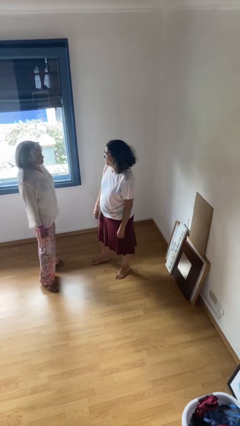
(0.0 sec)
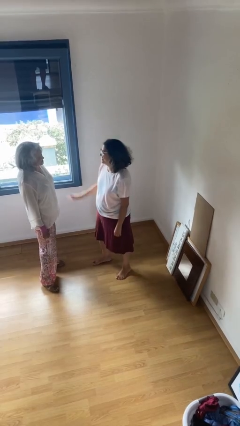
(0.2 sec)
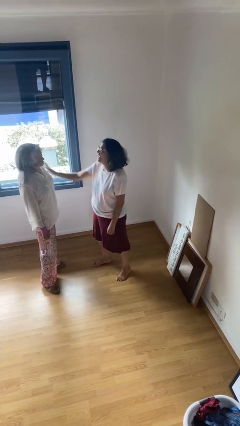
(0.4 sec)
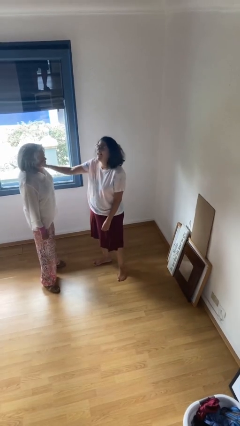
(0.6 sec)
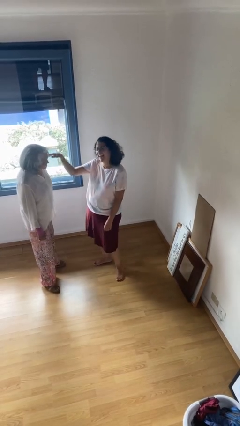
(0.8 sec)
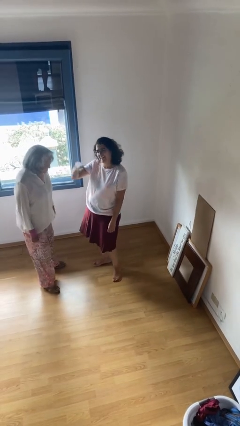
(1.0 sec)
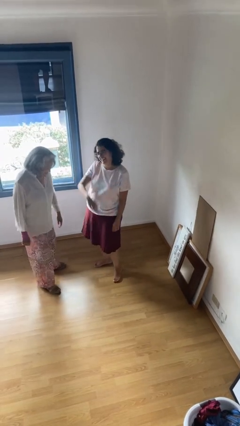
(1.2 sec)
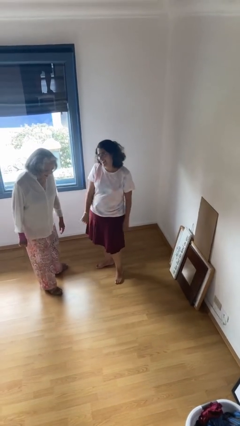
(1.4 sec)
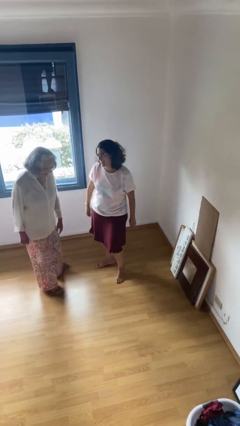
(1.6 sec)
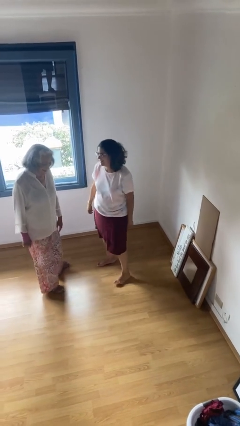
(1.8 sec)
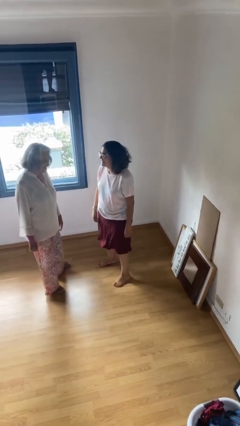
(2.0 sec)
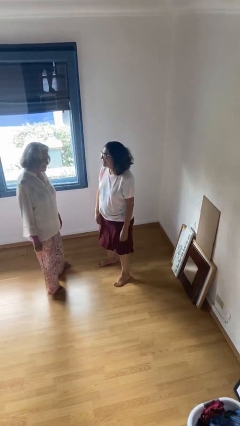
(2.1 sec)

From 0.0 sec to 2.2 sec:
person shoves person

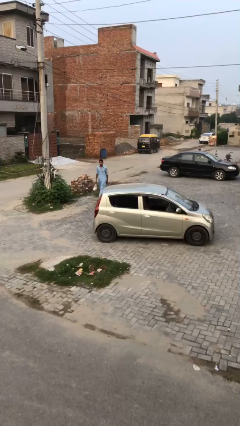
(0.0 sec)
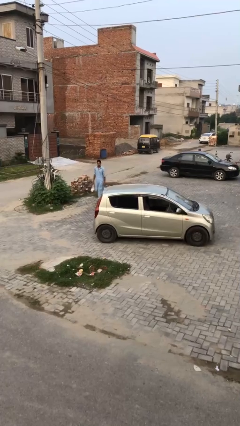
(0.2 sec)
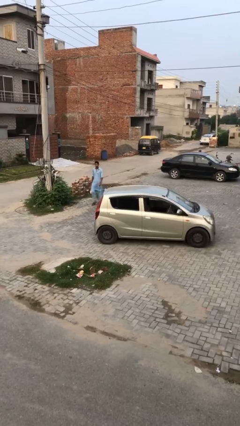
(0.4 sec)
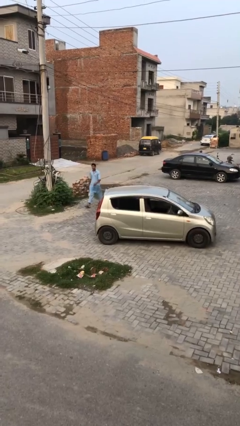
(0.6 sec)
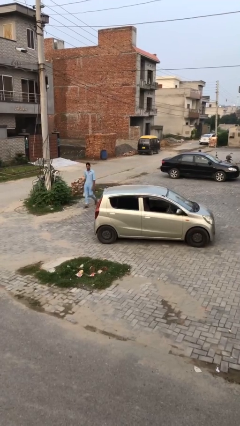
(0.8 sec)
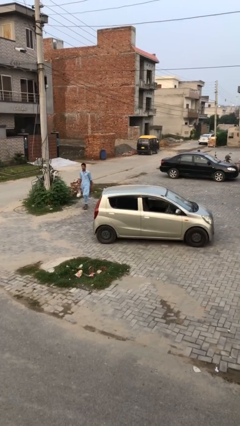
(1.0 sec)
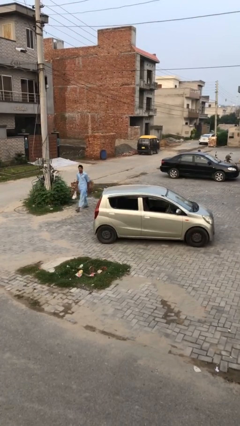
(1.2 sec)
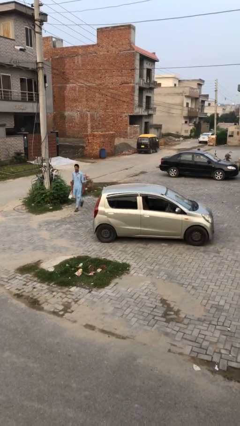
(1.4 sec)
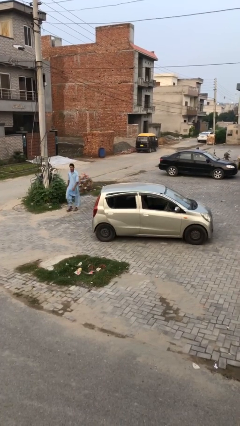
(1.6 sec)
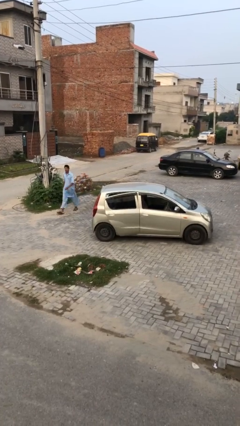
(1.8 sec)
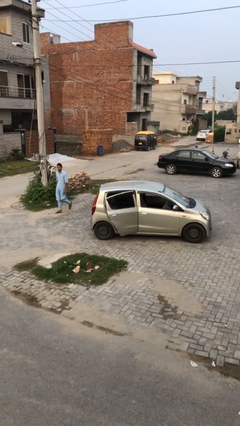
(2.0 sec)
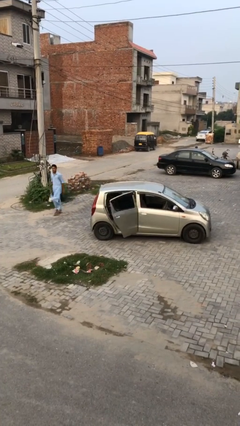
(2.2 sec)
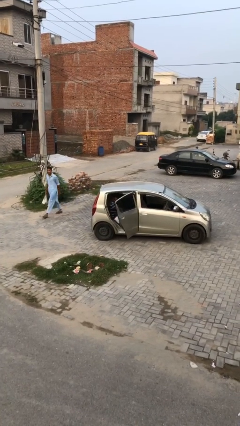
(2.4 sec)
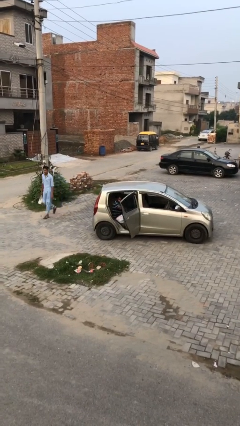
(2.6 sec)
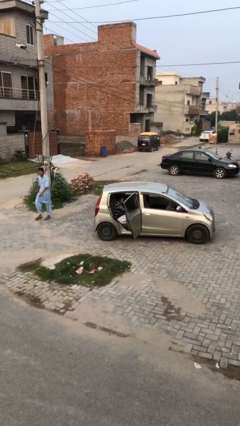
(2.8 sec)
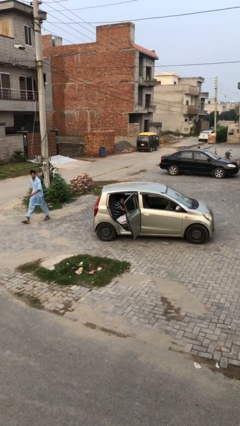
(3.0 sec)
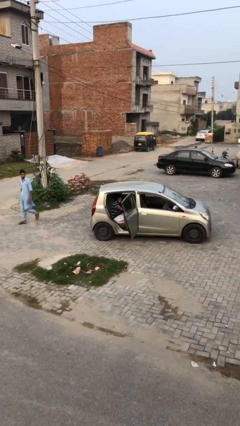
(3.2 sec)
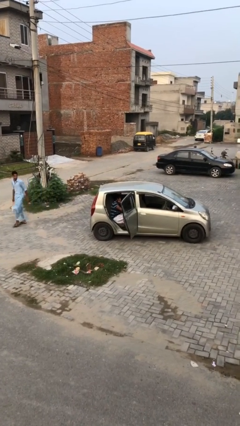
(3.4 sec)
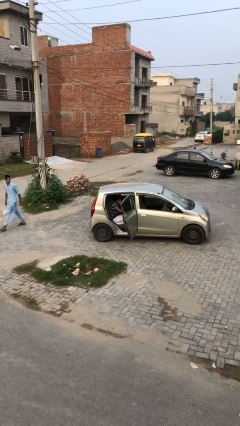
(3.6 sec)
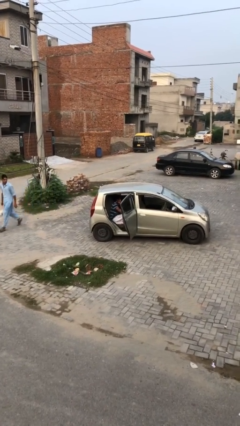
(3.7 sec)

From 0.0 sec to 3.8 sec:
person opens car door

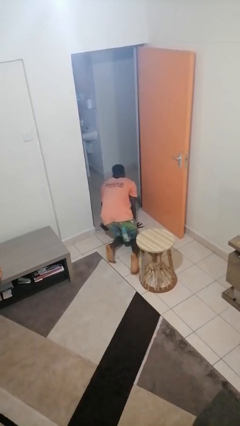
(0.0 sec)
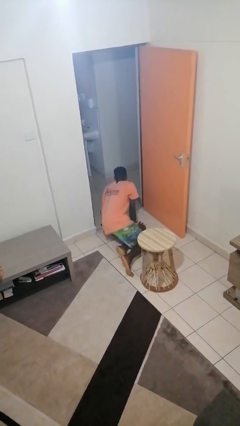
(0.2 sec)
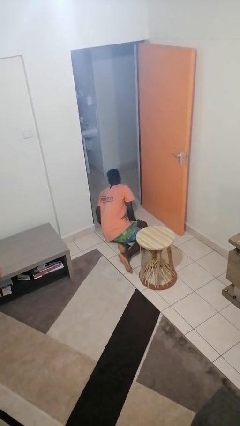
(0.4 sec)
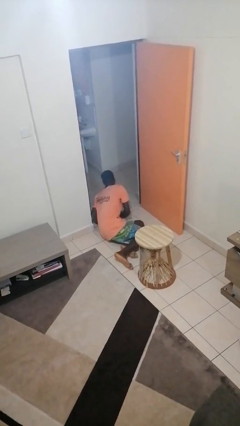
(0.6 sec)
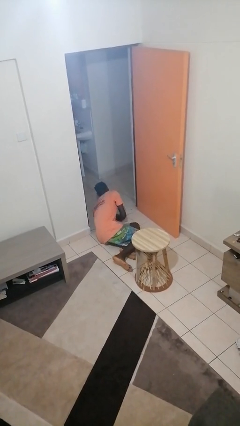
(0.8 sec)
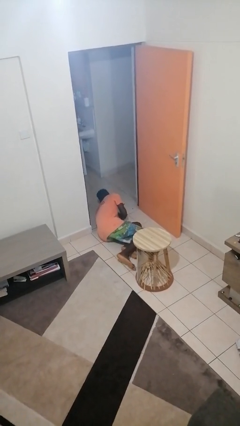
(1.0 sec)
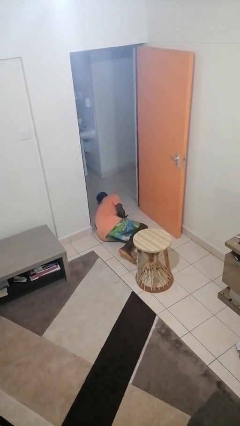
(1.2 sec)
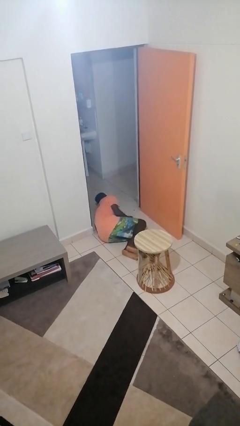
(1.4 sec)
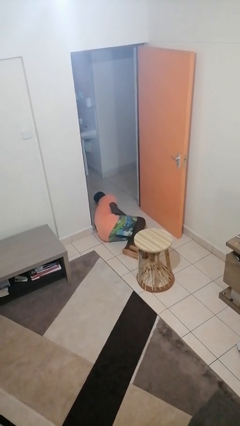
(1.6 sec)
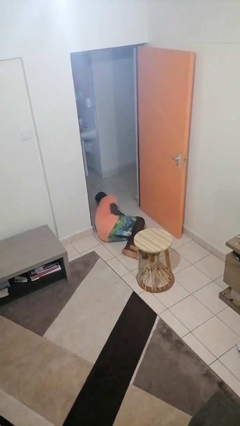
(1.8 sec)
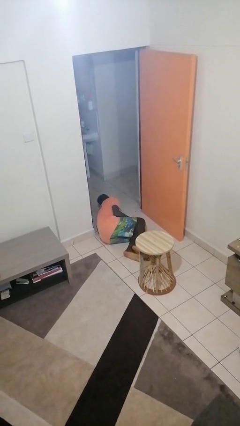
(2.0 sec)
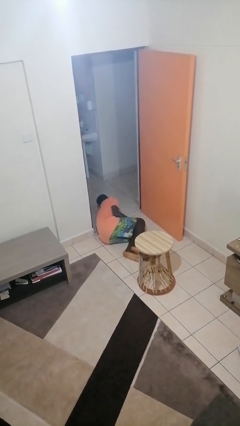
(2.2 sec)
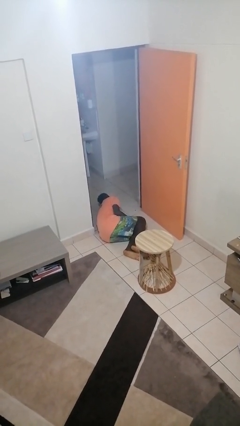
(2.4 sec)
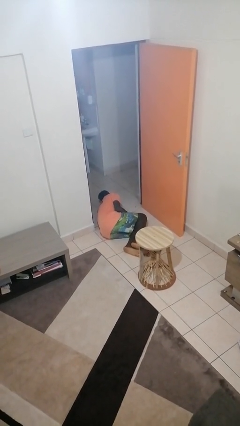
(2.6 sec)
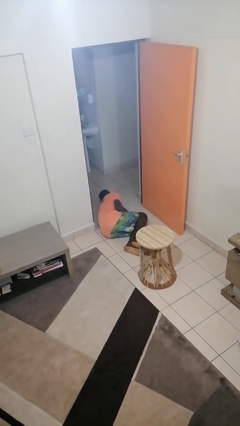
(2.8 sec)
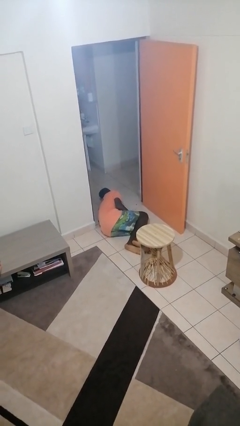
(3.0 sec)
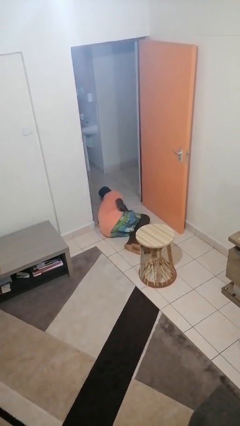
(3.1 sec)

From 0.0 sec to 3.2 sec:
person lies down on floor

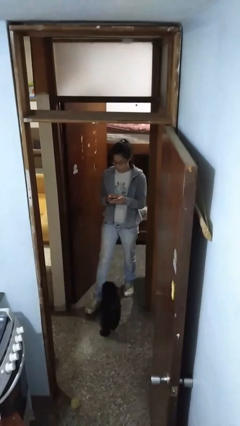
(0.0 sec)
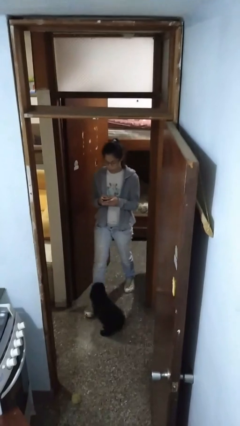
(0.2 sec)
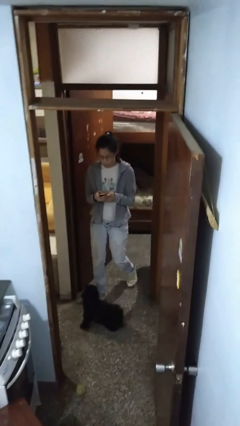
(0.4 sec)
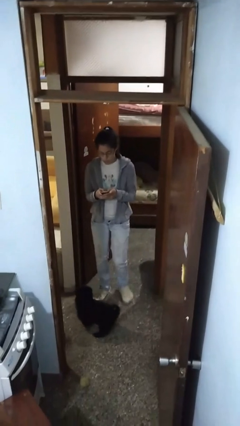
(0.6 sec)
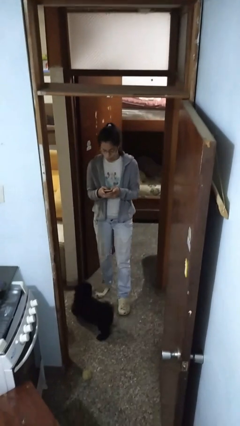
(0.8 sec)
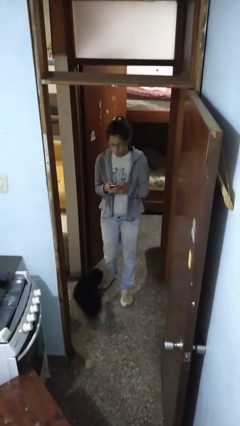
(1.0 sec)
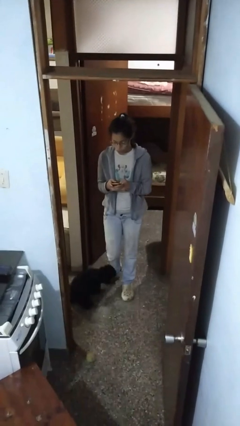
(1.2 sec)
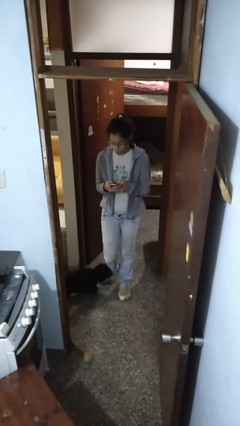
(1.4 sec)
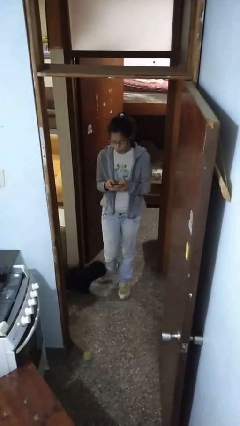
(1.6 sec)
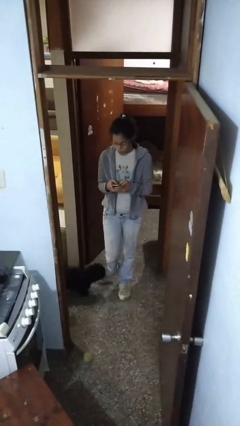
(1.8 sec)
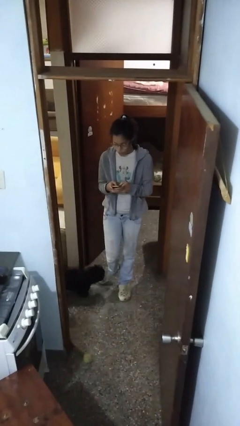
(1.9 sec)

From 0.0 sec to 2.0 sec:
person enters scene through structure

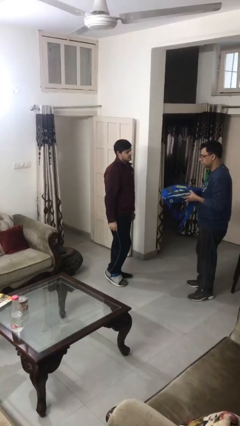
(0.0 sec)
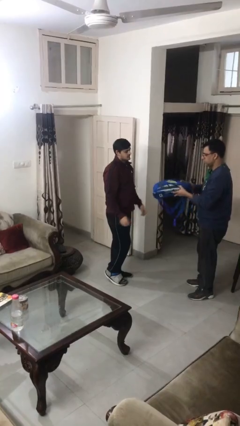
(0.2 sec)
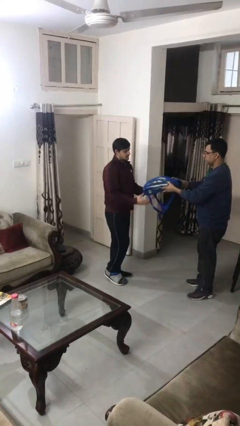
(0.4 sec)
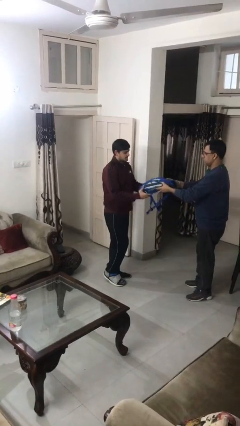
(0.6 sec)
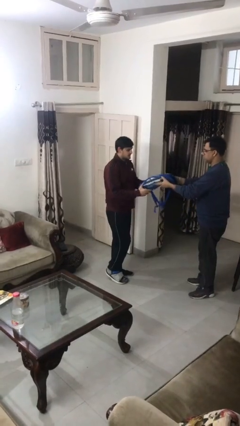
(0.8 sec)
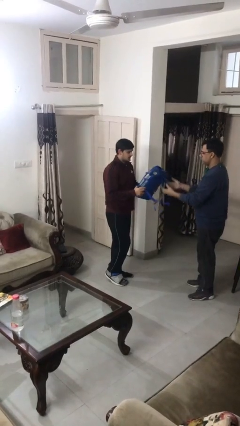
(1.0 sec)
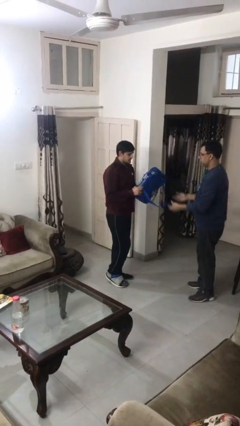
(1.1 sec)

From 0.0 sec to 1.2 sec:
person transfers object to person

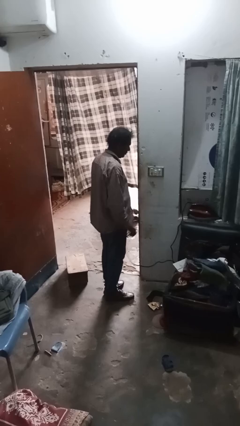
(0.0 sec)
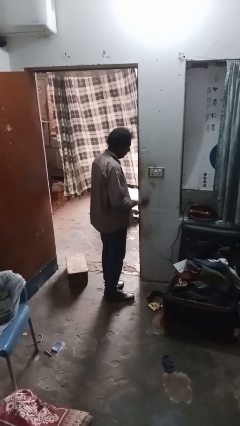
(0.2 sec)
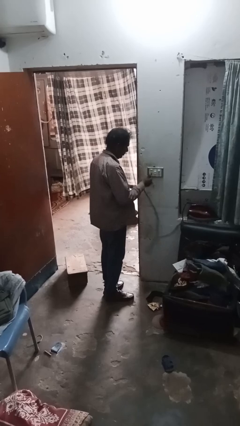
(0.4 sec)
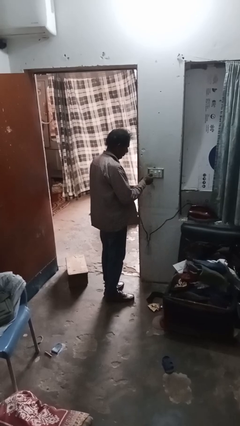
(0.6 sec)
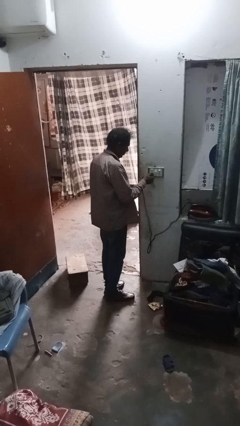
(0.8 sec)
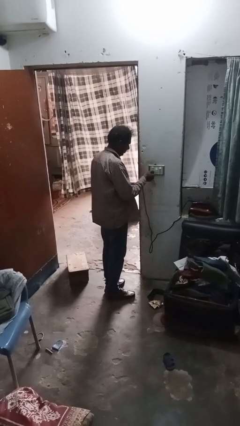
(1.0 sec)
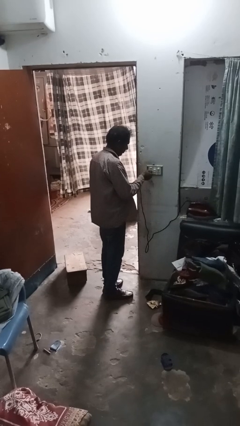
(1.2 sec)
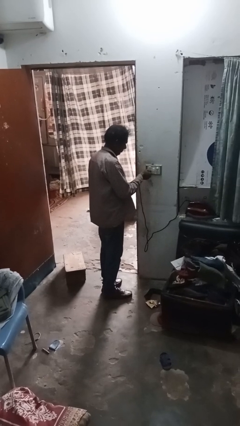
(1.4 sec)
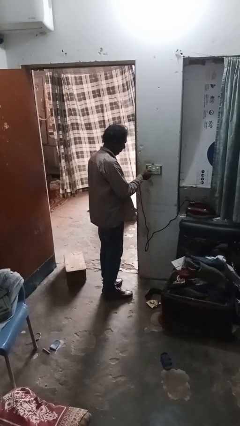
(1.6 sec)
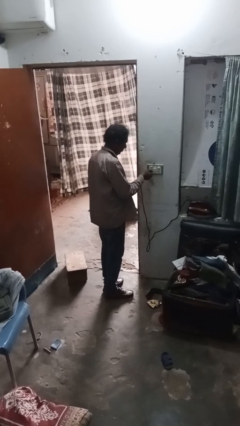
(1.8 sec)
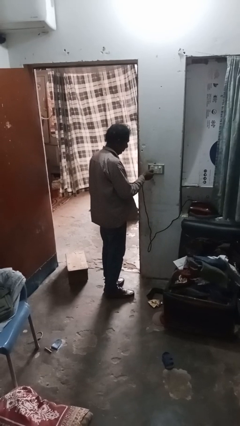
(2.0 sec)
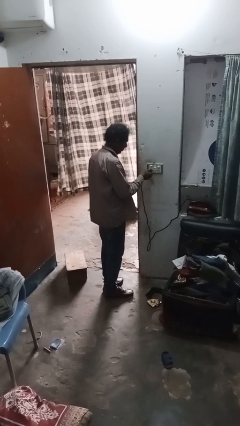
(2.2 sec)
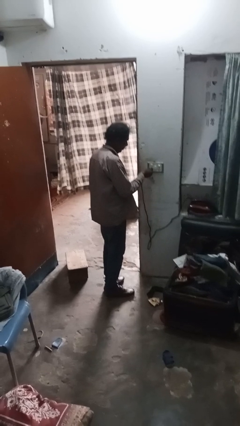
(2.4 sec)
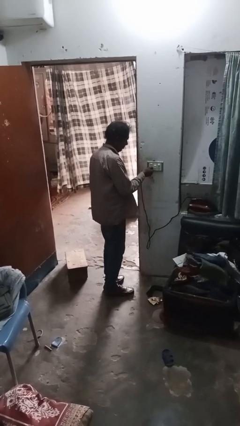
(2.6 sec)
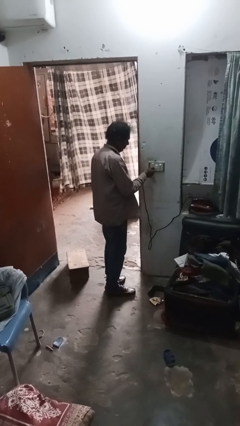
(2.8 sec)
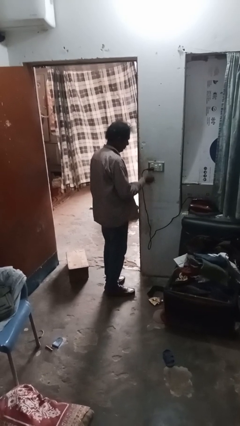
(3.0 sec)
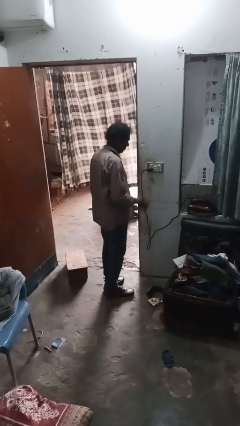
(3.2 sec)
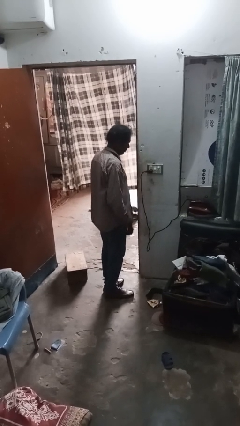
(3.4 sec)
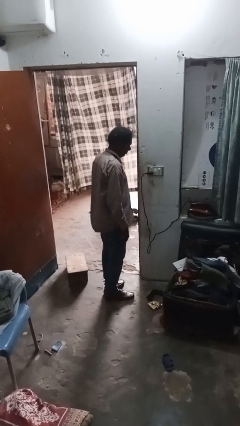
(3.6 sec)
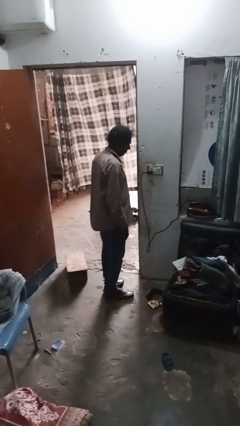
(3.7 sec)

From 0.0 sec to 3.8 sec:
person plugs into electrical socket

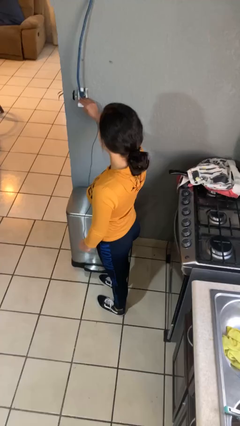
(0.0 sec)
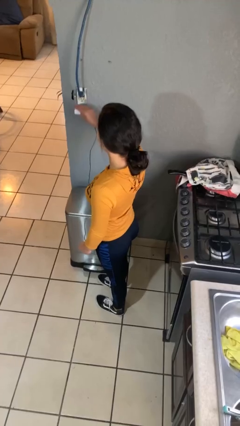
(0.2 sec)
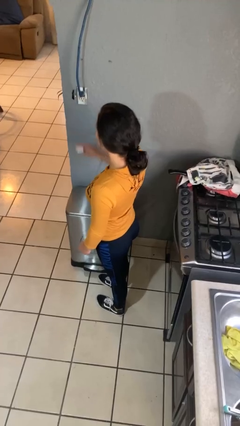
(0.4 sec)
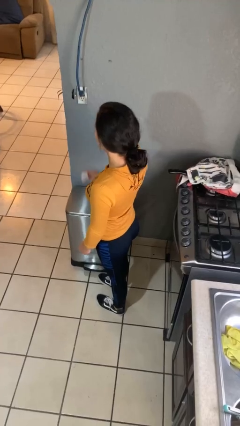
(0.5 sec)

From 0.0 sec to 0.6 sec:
person unplugs from electrical socket

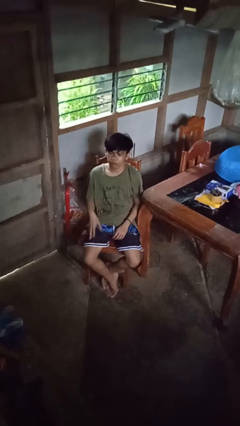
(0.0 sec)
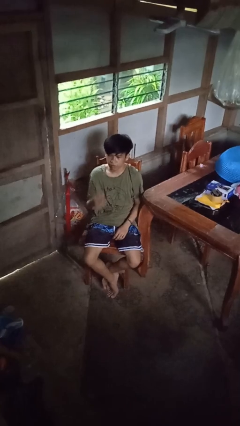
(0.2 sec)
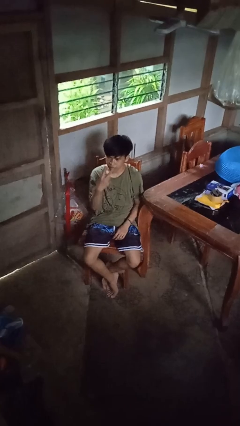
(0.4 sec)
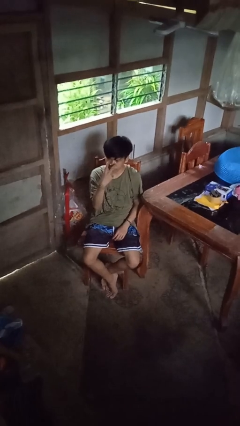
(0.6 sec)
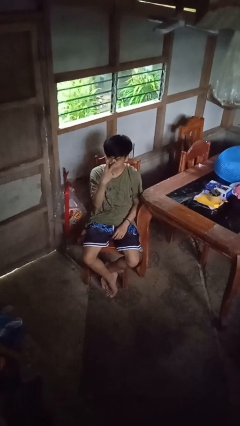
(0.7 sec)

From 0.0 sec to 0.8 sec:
person gestures watch closely
